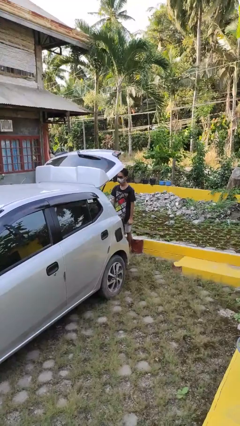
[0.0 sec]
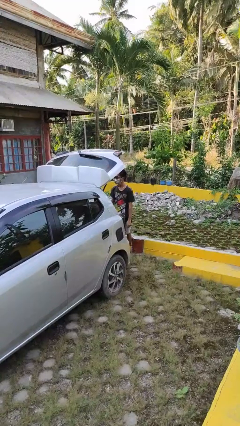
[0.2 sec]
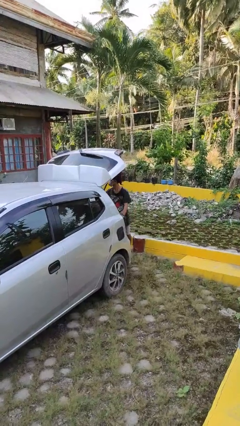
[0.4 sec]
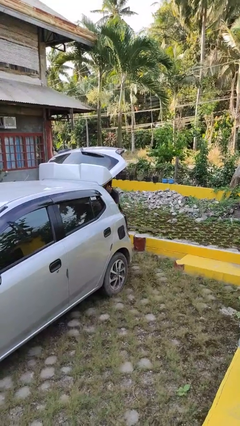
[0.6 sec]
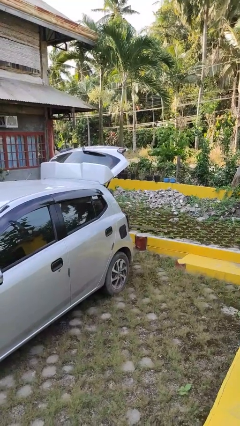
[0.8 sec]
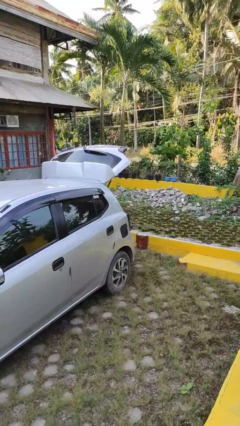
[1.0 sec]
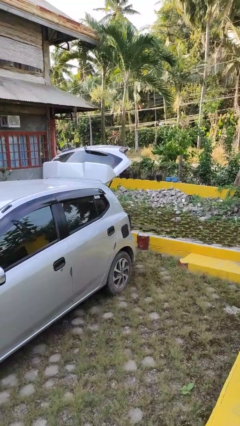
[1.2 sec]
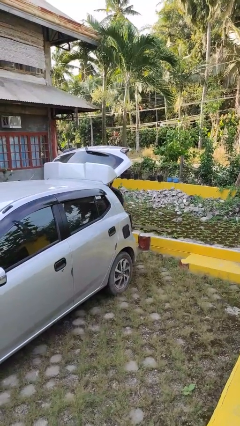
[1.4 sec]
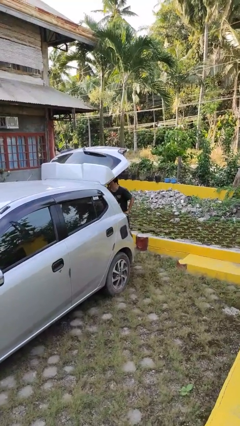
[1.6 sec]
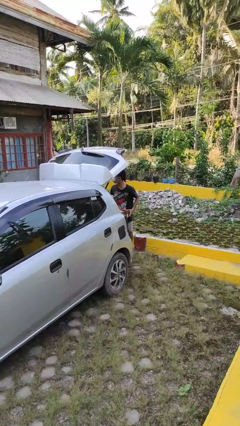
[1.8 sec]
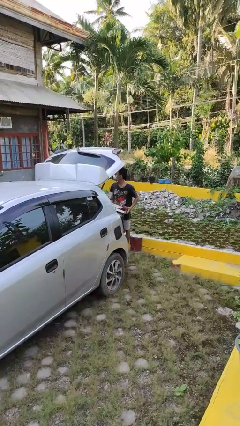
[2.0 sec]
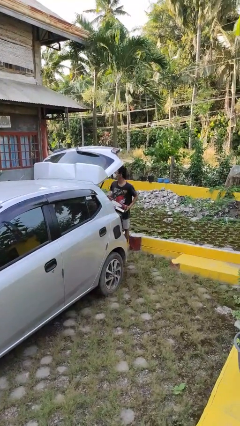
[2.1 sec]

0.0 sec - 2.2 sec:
person unloads car

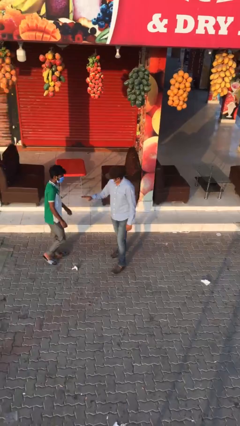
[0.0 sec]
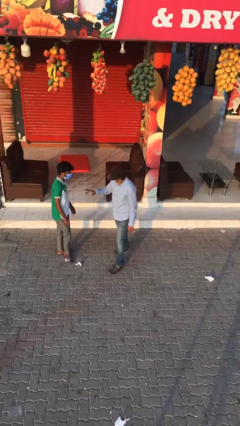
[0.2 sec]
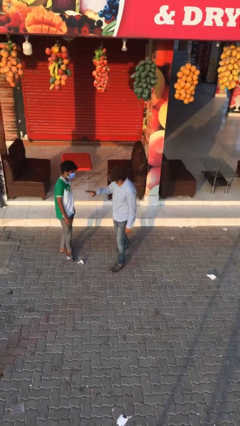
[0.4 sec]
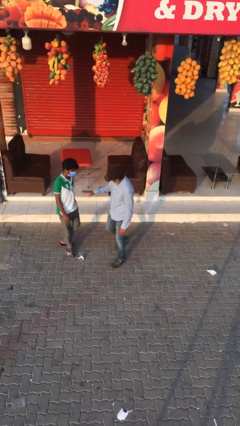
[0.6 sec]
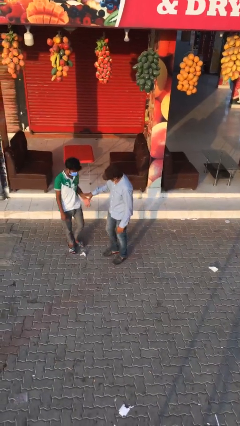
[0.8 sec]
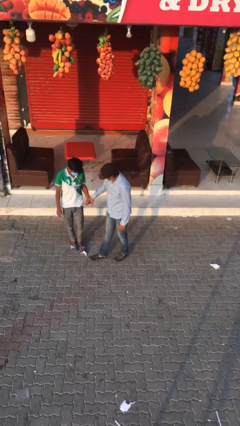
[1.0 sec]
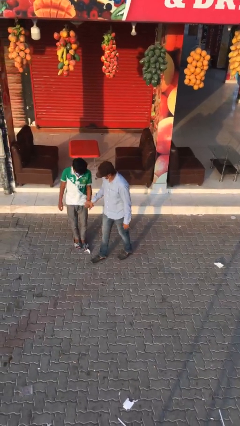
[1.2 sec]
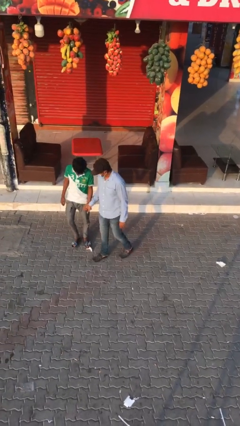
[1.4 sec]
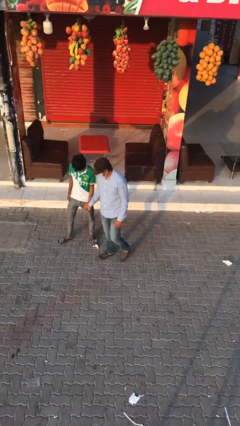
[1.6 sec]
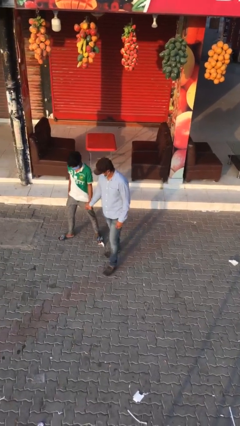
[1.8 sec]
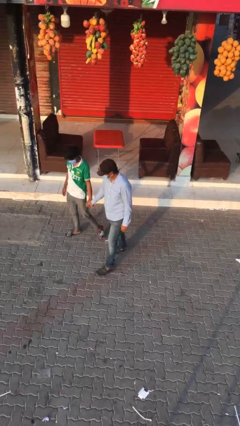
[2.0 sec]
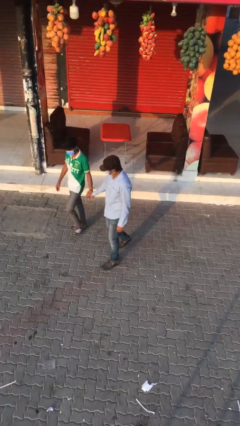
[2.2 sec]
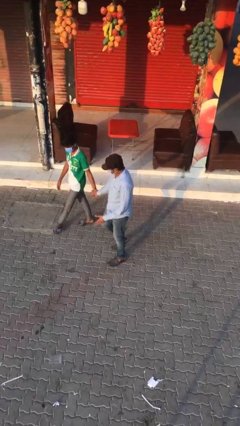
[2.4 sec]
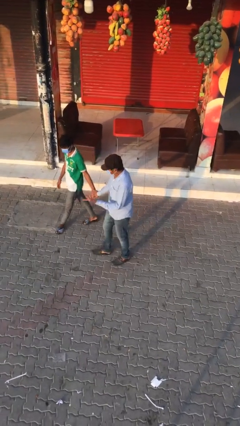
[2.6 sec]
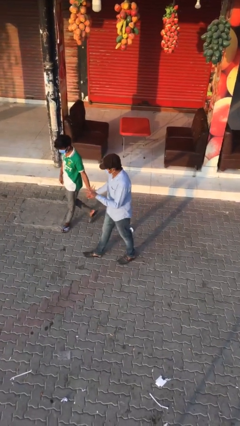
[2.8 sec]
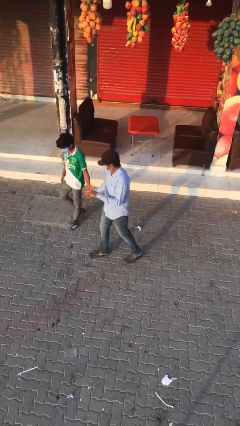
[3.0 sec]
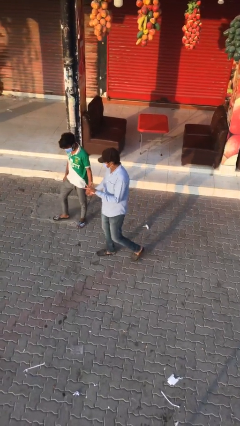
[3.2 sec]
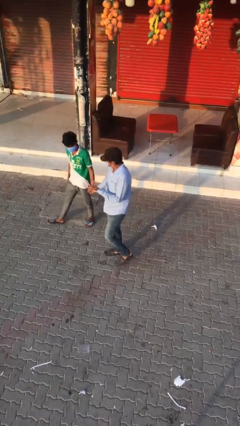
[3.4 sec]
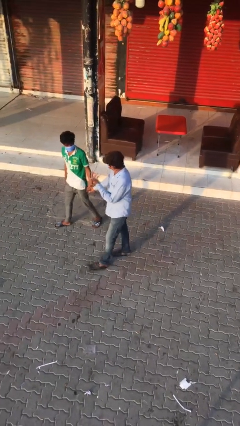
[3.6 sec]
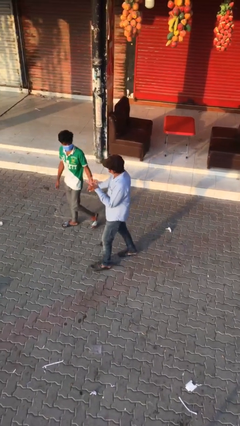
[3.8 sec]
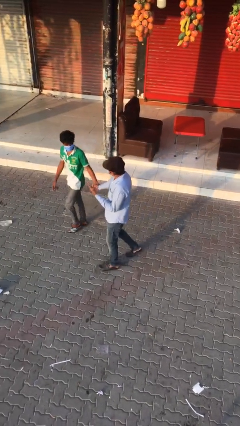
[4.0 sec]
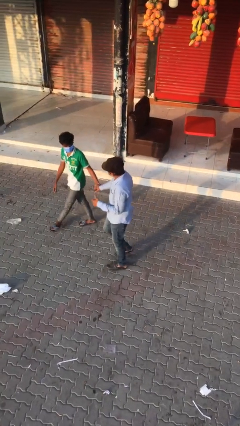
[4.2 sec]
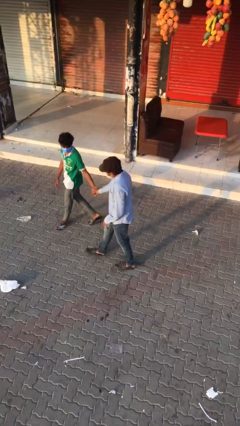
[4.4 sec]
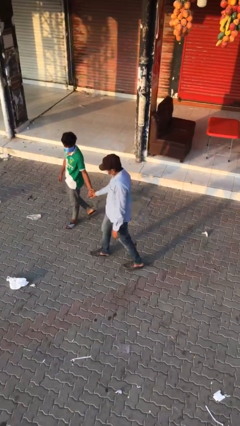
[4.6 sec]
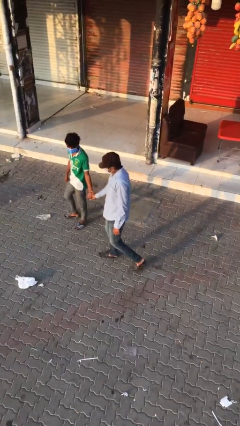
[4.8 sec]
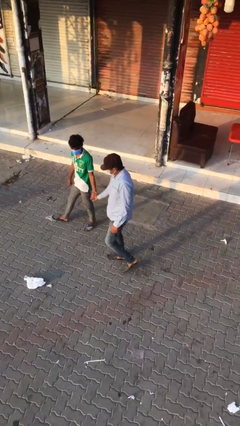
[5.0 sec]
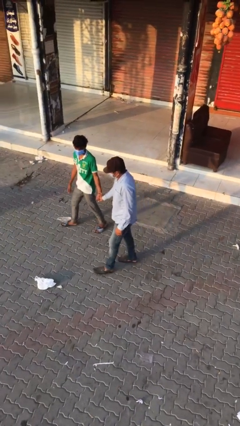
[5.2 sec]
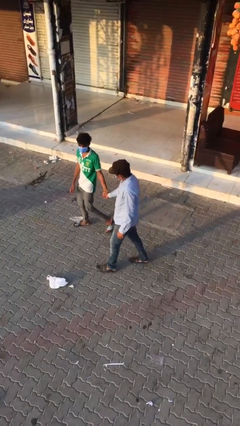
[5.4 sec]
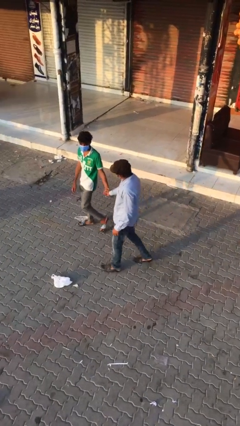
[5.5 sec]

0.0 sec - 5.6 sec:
person holds hand

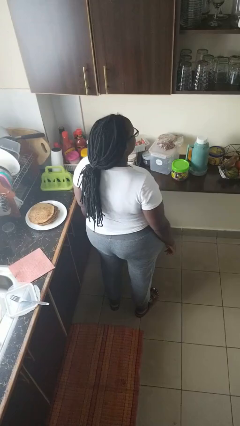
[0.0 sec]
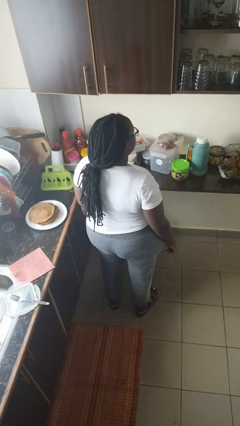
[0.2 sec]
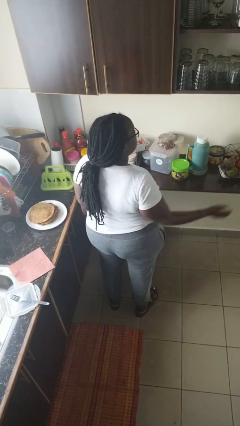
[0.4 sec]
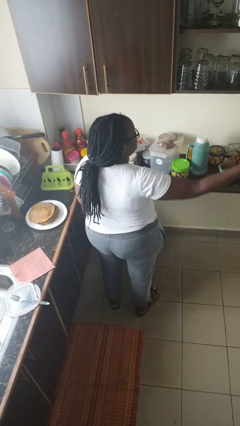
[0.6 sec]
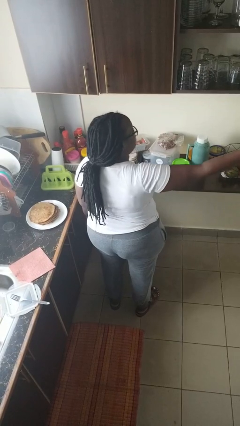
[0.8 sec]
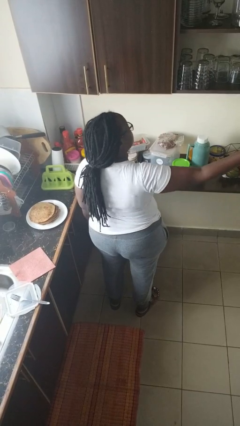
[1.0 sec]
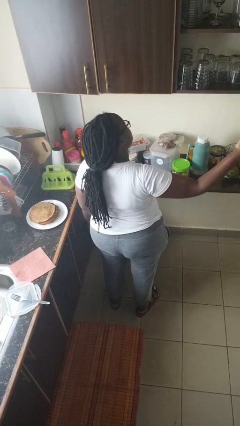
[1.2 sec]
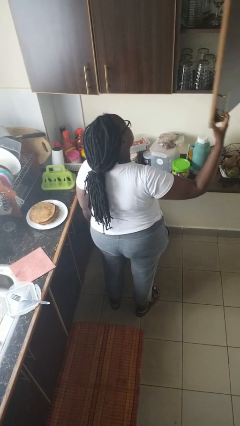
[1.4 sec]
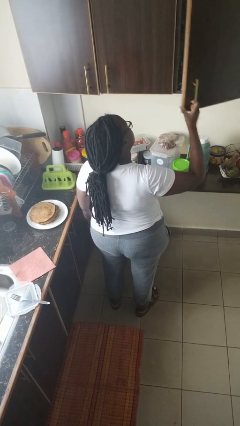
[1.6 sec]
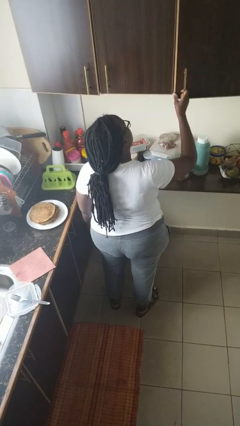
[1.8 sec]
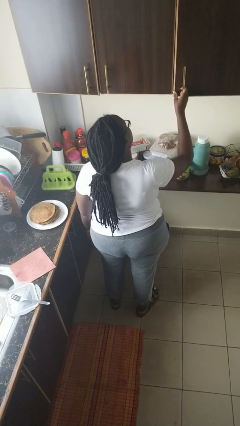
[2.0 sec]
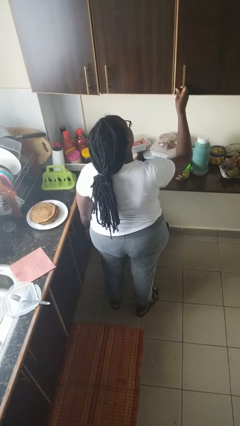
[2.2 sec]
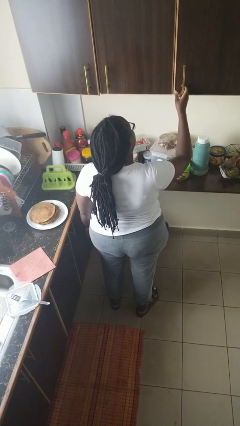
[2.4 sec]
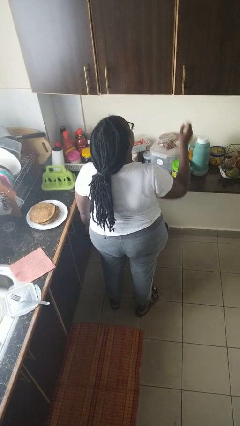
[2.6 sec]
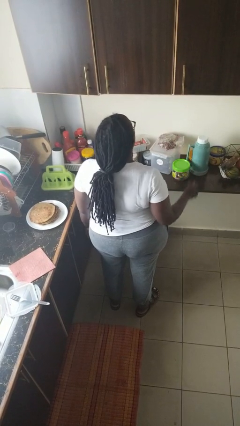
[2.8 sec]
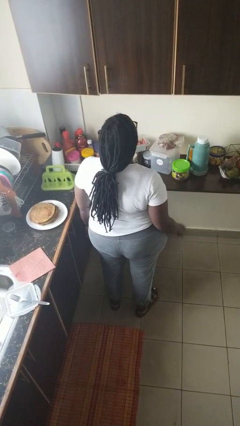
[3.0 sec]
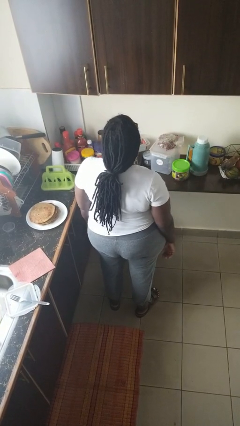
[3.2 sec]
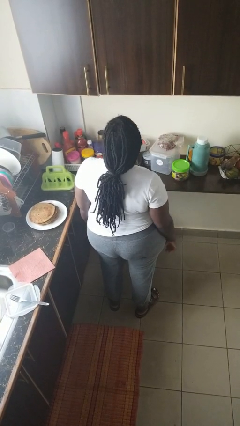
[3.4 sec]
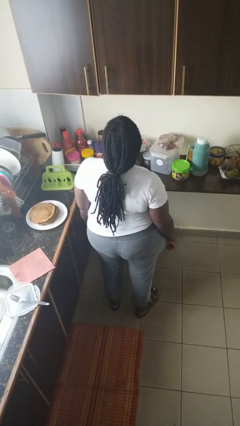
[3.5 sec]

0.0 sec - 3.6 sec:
person closes cabinet

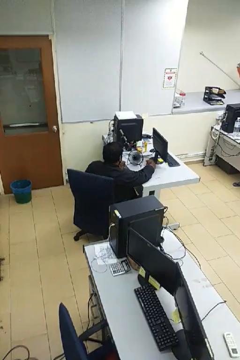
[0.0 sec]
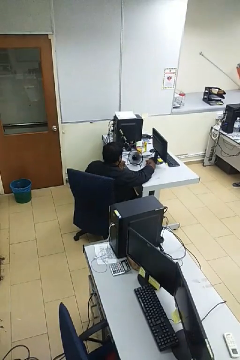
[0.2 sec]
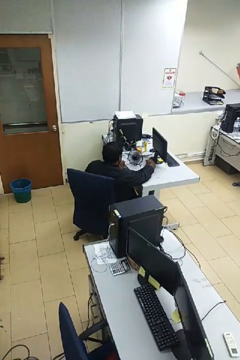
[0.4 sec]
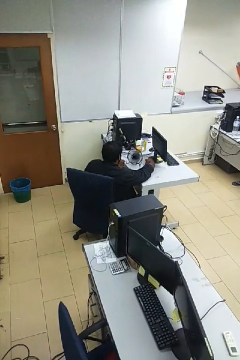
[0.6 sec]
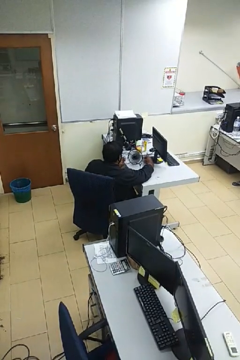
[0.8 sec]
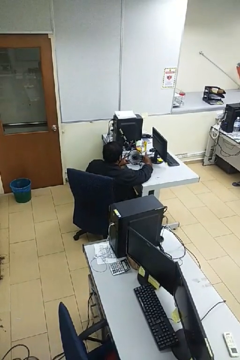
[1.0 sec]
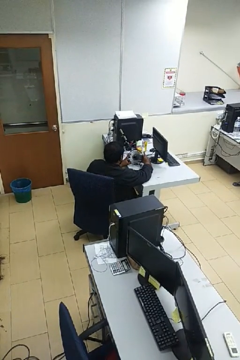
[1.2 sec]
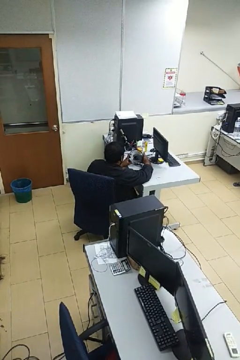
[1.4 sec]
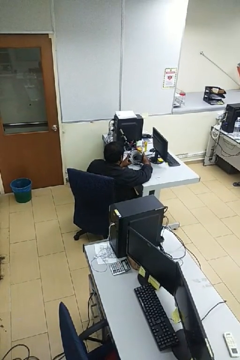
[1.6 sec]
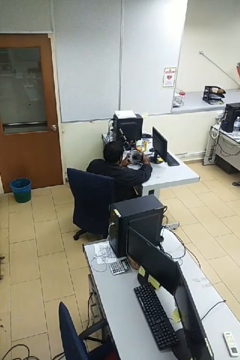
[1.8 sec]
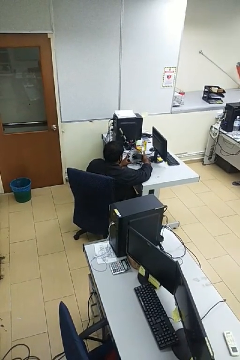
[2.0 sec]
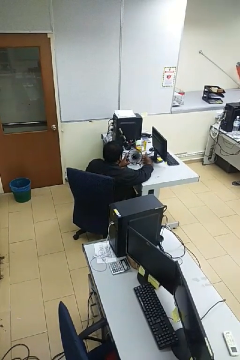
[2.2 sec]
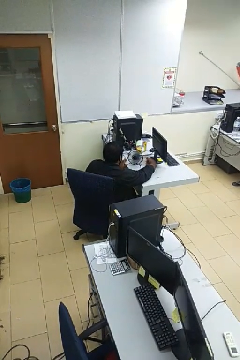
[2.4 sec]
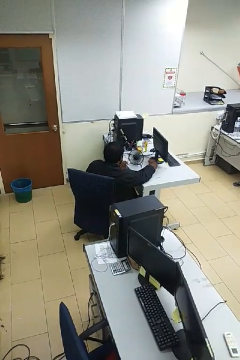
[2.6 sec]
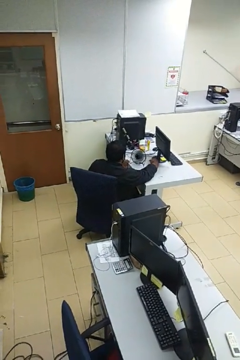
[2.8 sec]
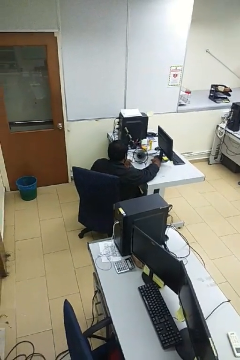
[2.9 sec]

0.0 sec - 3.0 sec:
person turns off fan

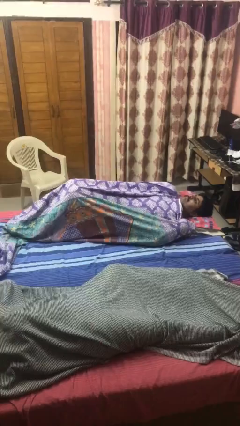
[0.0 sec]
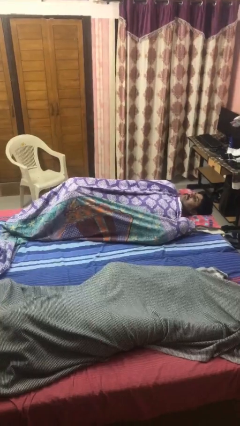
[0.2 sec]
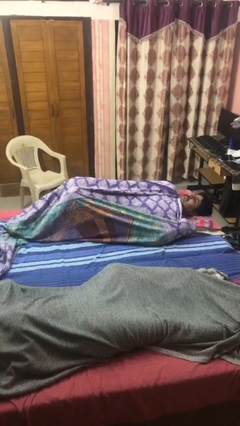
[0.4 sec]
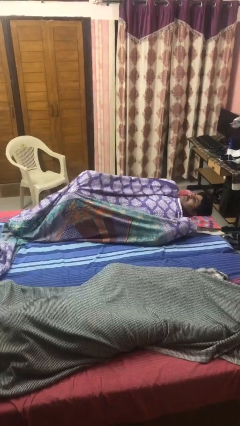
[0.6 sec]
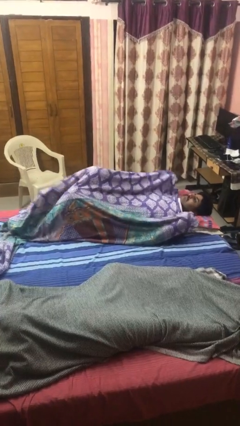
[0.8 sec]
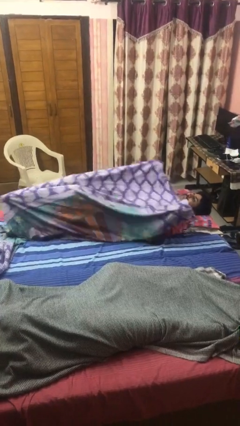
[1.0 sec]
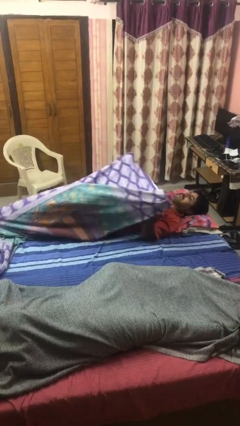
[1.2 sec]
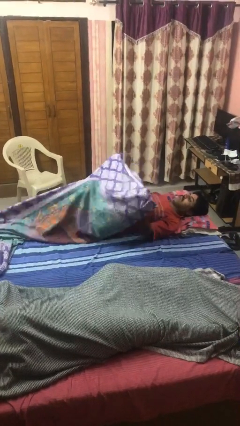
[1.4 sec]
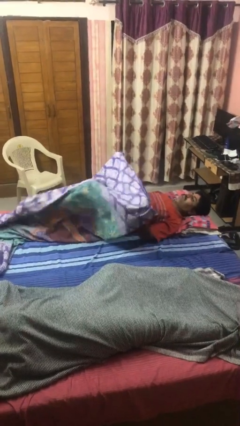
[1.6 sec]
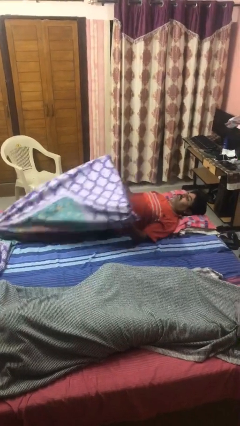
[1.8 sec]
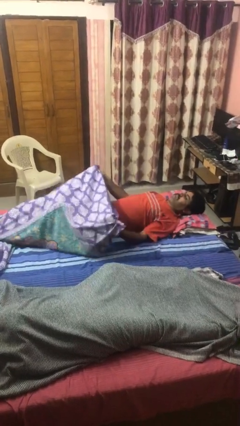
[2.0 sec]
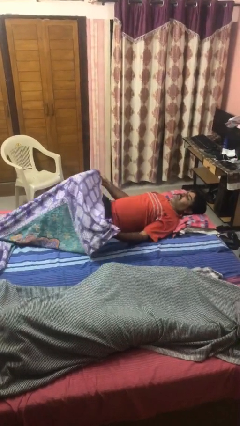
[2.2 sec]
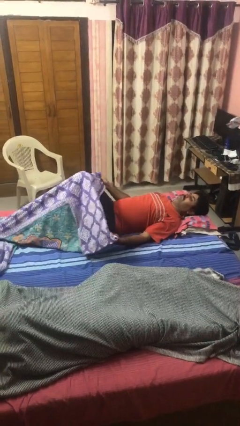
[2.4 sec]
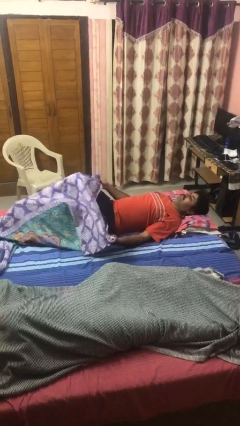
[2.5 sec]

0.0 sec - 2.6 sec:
person uncovers with bedsheets

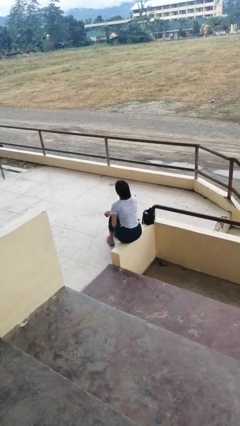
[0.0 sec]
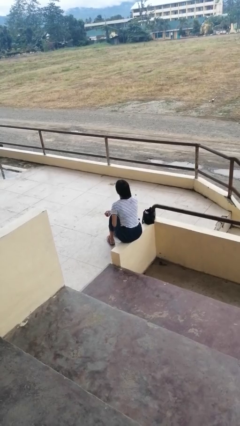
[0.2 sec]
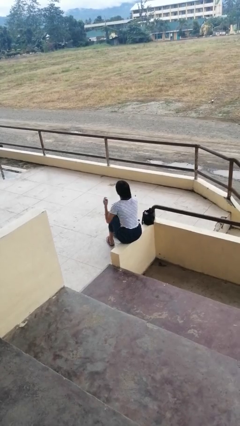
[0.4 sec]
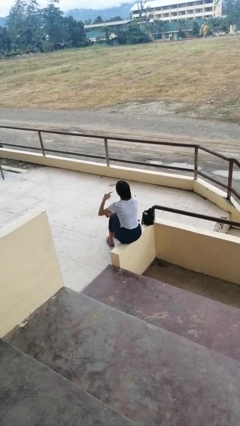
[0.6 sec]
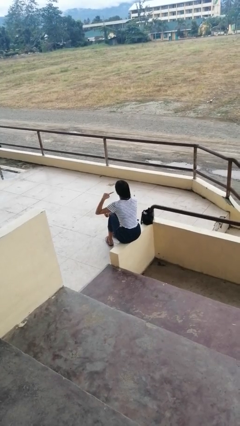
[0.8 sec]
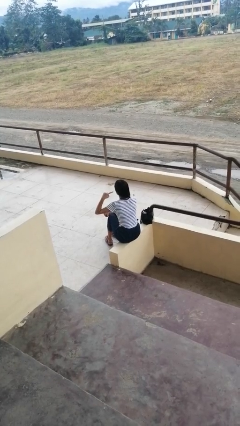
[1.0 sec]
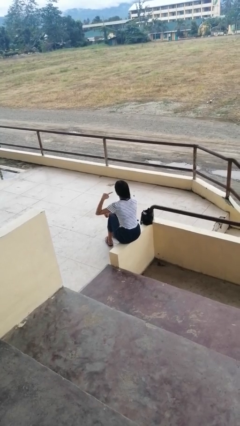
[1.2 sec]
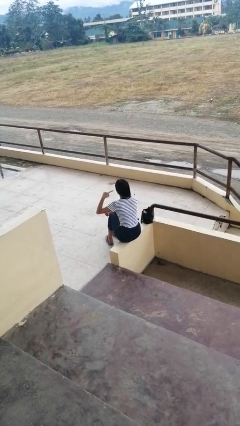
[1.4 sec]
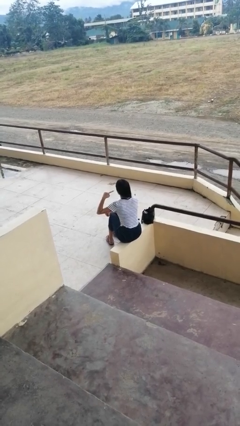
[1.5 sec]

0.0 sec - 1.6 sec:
person gestures listen closely
